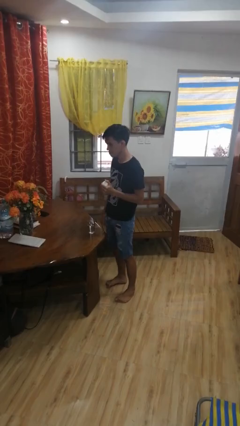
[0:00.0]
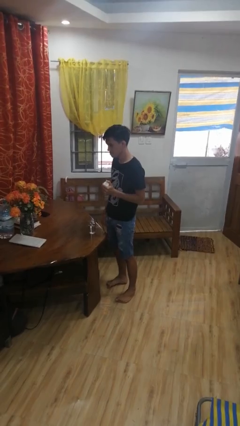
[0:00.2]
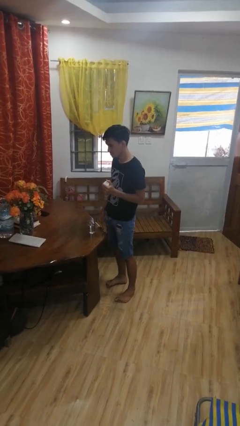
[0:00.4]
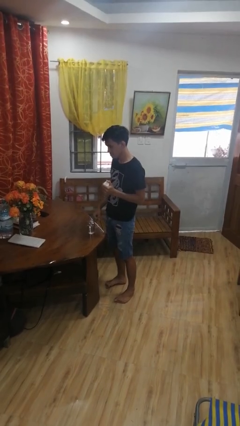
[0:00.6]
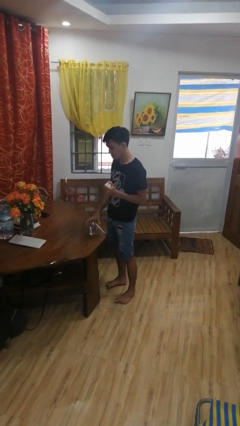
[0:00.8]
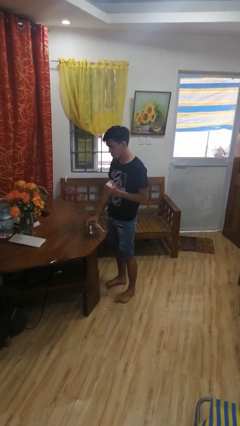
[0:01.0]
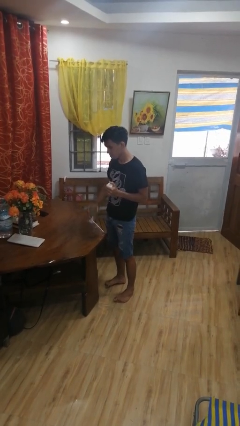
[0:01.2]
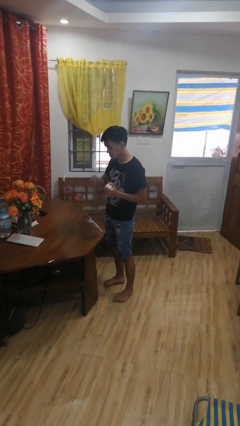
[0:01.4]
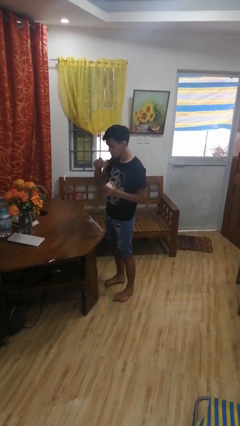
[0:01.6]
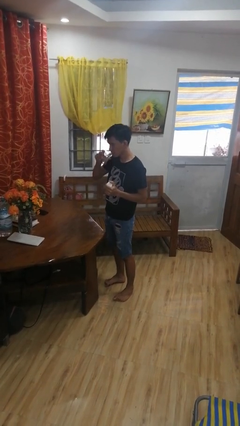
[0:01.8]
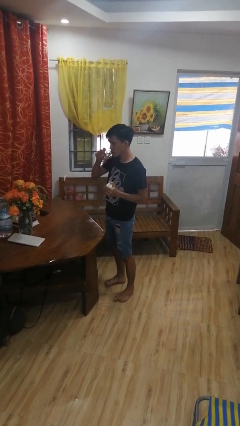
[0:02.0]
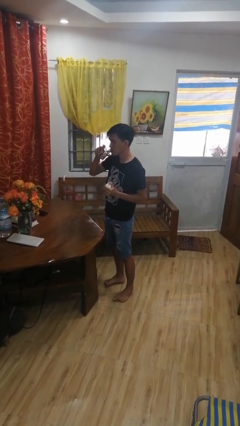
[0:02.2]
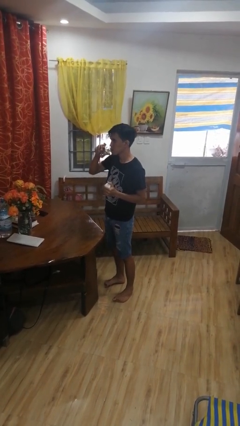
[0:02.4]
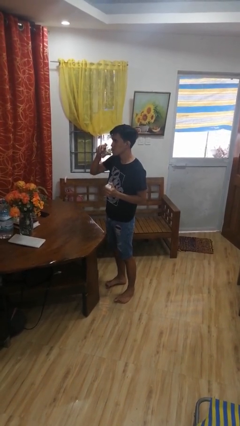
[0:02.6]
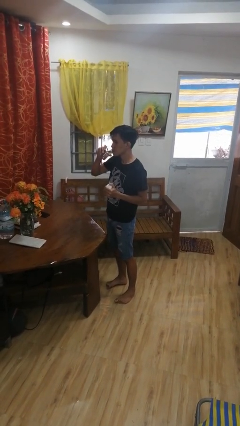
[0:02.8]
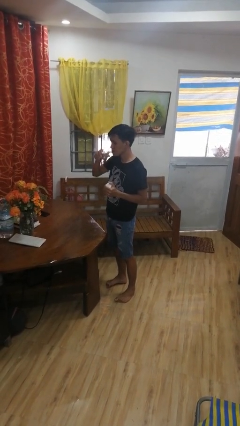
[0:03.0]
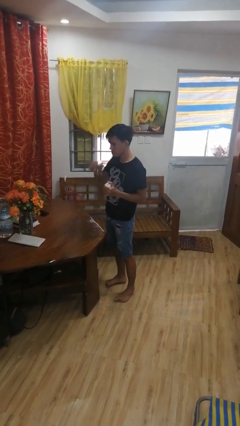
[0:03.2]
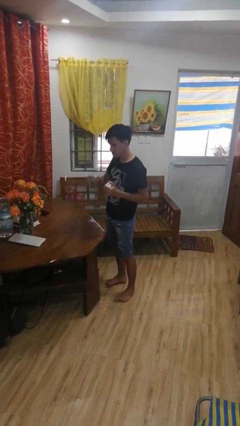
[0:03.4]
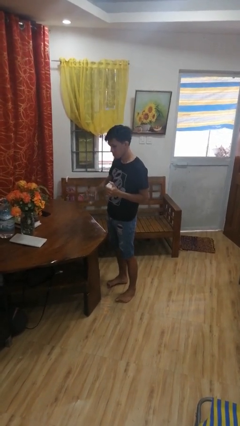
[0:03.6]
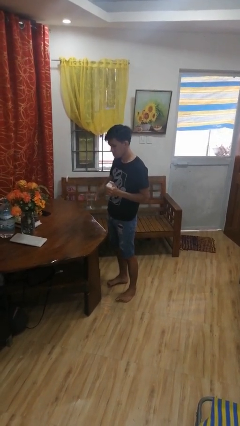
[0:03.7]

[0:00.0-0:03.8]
person drinks from cup

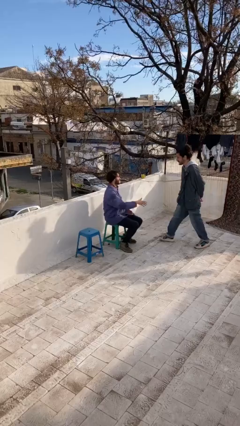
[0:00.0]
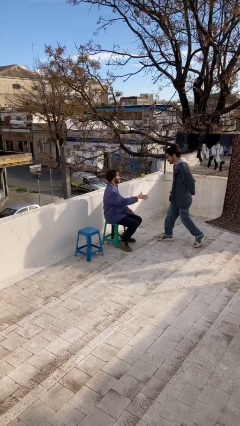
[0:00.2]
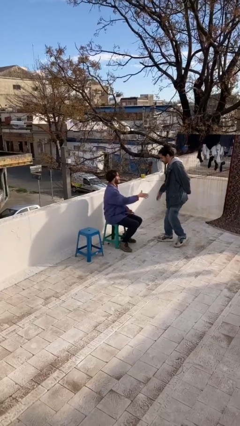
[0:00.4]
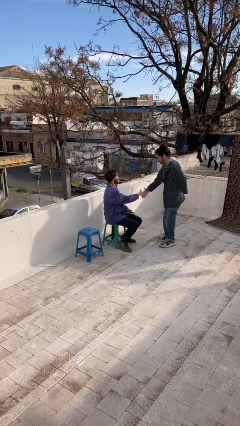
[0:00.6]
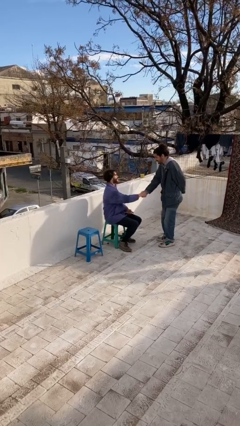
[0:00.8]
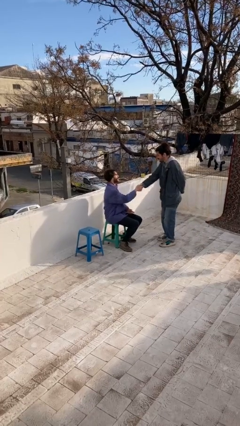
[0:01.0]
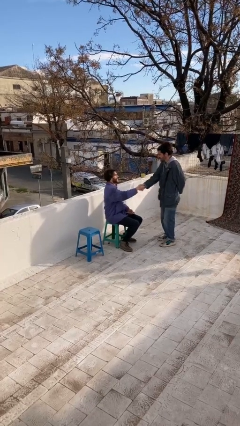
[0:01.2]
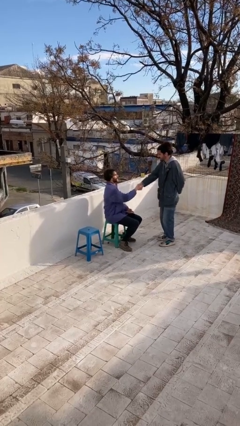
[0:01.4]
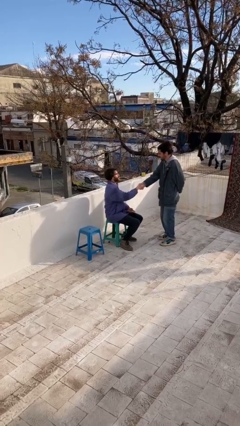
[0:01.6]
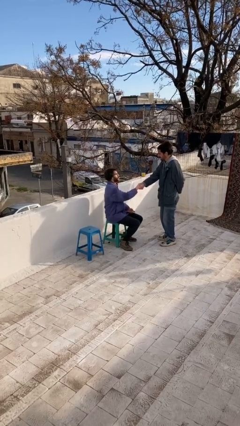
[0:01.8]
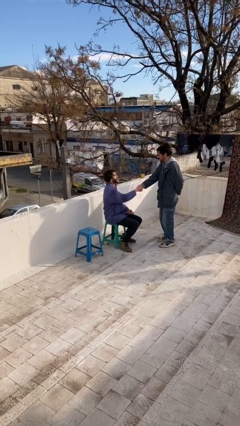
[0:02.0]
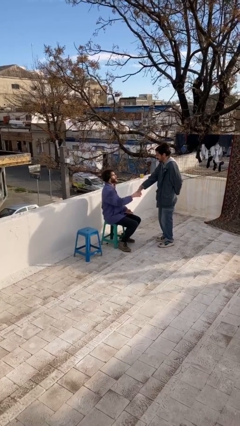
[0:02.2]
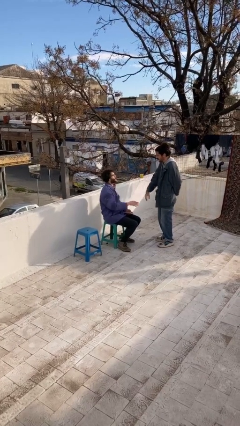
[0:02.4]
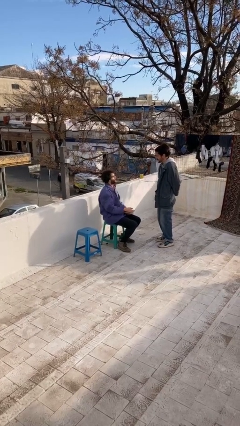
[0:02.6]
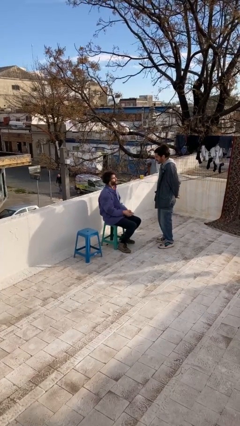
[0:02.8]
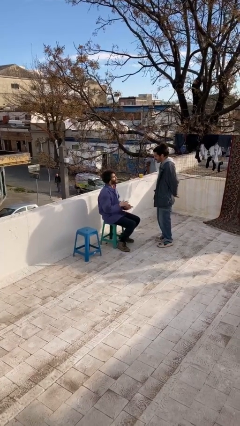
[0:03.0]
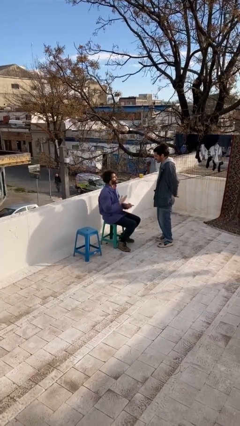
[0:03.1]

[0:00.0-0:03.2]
person shakes hand

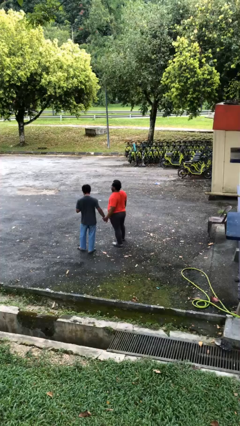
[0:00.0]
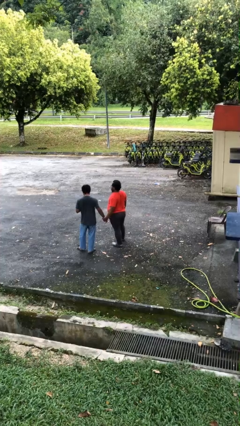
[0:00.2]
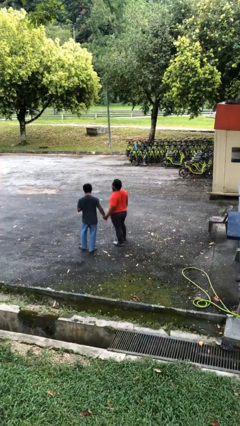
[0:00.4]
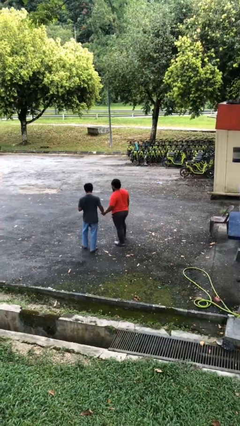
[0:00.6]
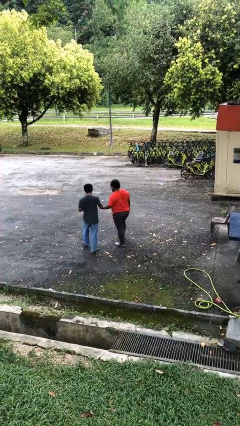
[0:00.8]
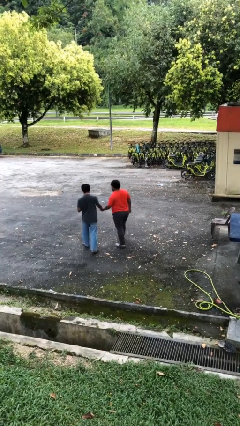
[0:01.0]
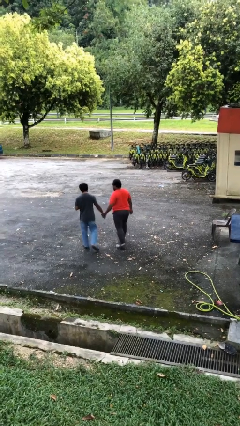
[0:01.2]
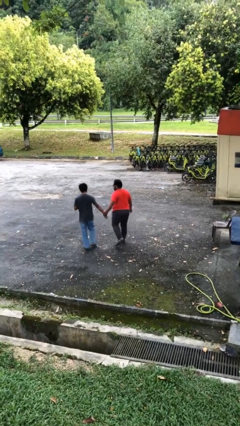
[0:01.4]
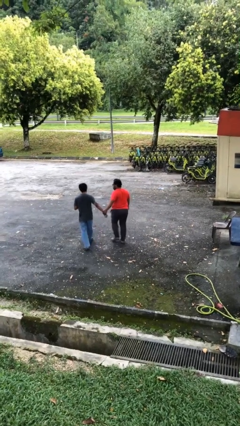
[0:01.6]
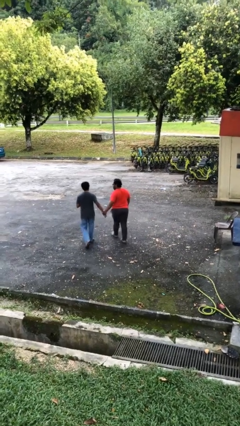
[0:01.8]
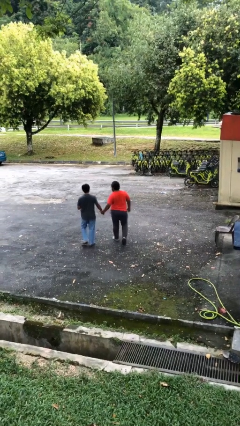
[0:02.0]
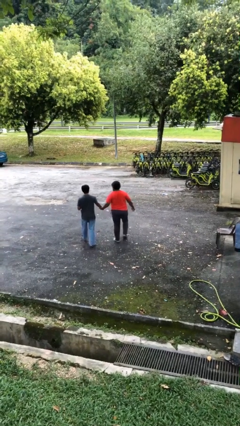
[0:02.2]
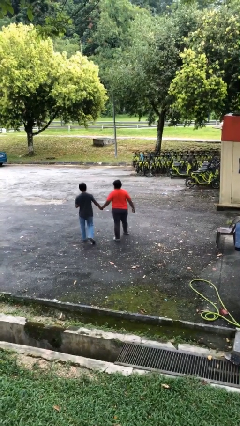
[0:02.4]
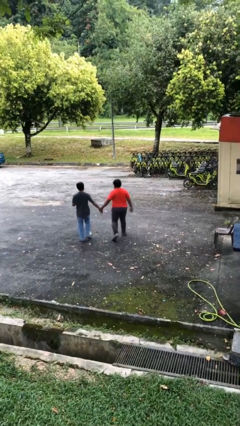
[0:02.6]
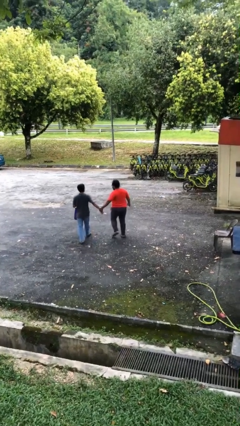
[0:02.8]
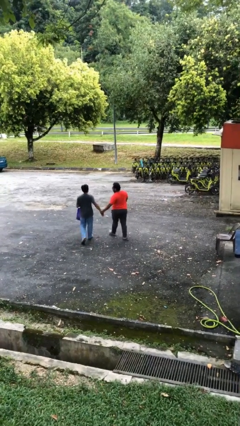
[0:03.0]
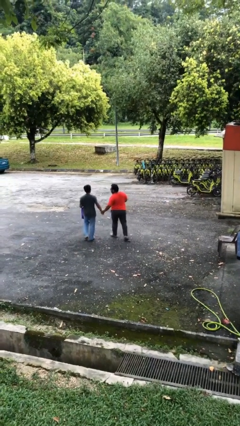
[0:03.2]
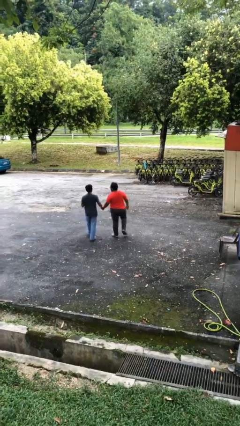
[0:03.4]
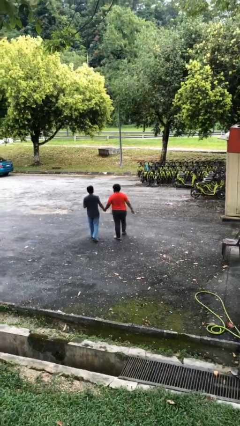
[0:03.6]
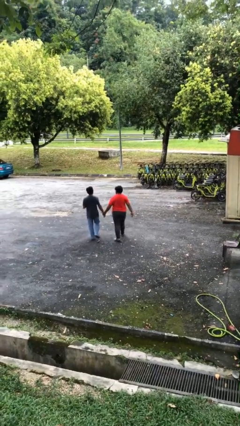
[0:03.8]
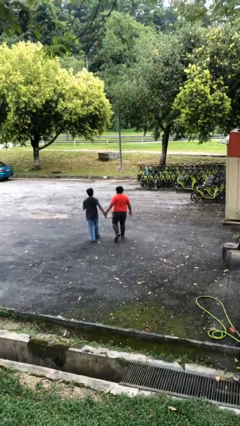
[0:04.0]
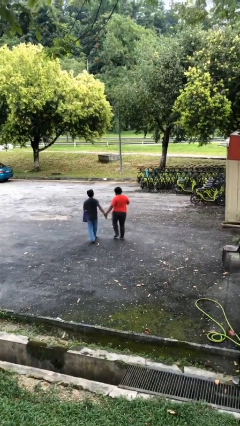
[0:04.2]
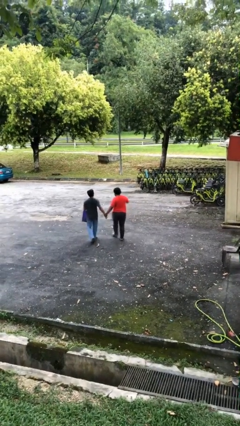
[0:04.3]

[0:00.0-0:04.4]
person holds hand

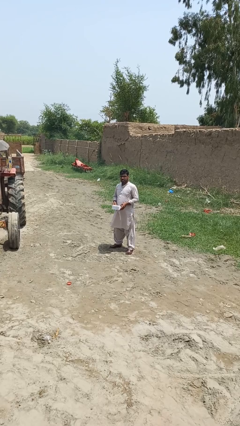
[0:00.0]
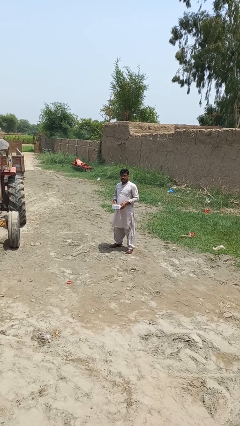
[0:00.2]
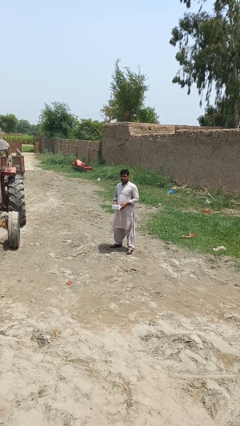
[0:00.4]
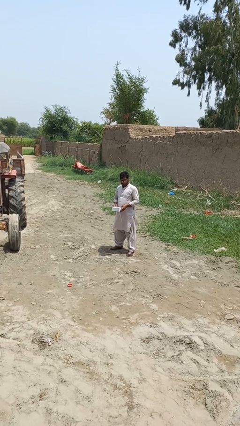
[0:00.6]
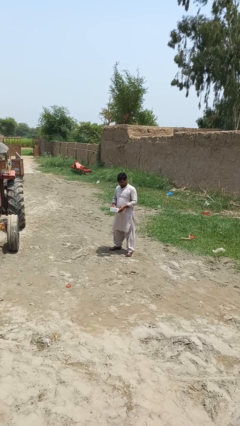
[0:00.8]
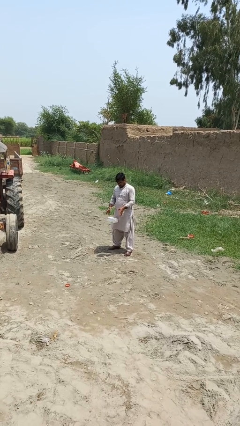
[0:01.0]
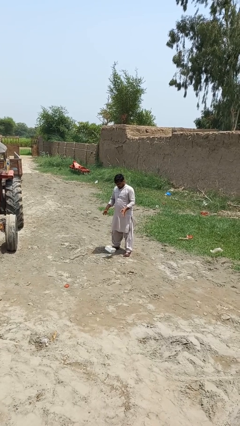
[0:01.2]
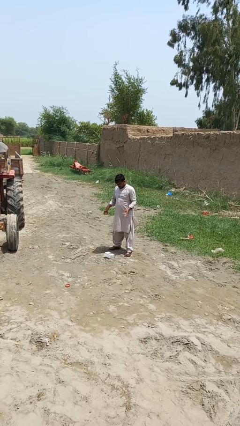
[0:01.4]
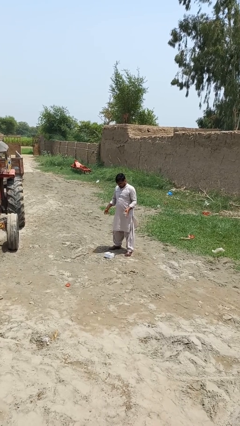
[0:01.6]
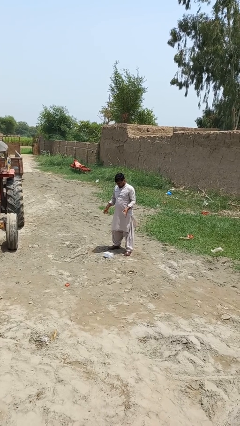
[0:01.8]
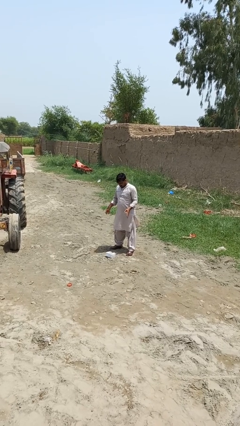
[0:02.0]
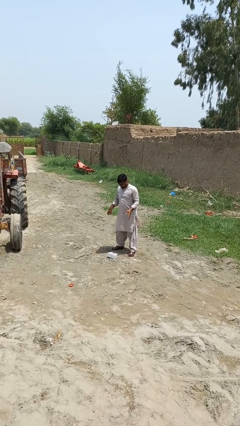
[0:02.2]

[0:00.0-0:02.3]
person drops object

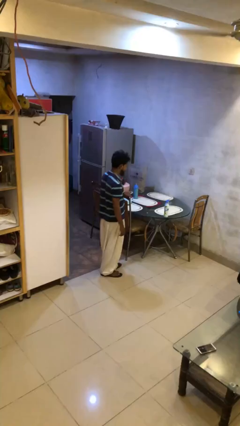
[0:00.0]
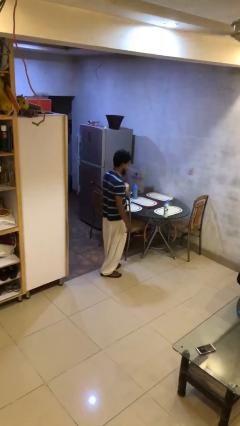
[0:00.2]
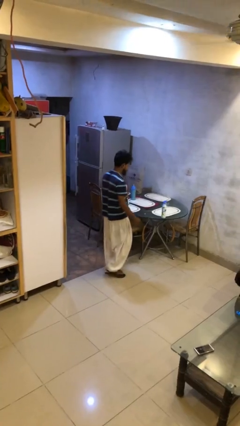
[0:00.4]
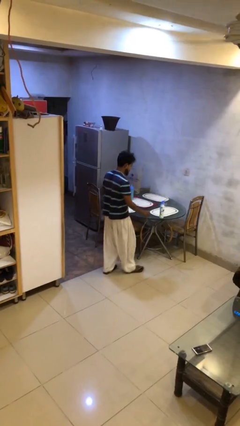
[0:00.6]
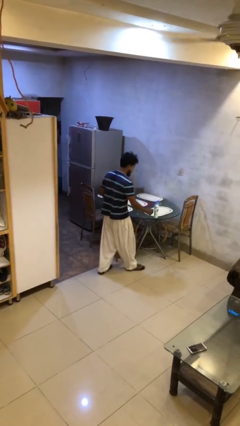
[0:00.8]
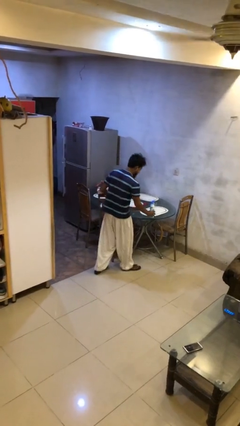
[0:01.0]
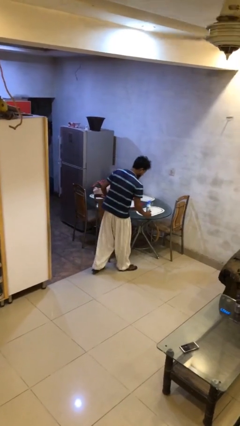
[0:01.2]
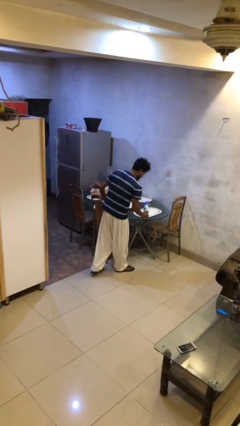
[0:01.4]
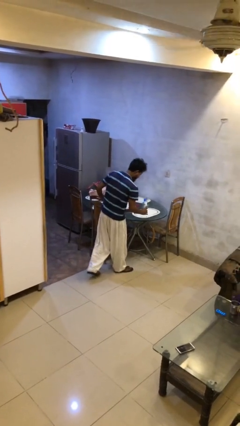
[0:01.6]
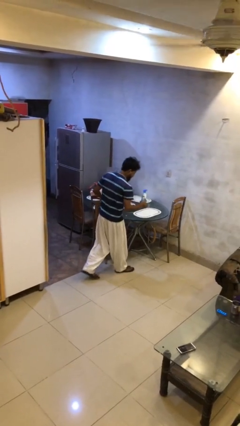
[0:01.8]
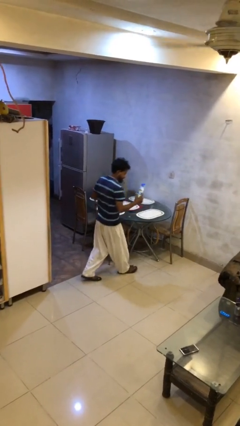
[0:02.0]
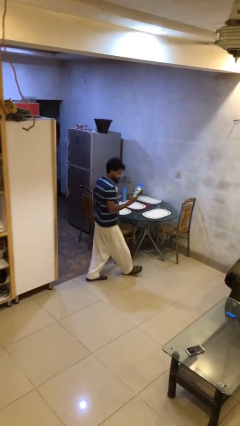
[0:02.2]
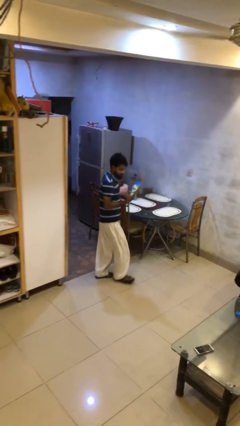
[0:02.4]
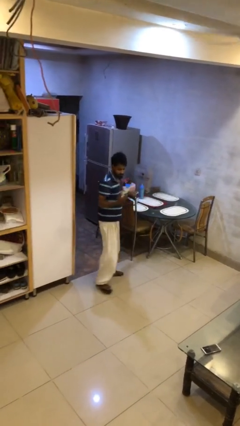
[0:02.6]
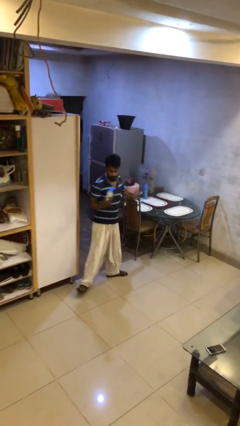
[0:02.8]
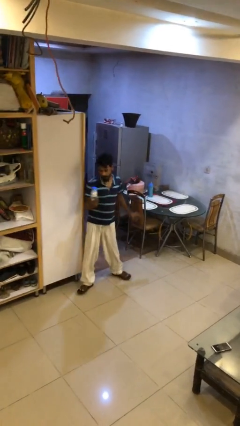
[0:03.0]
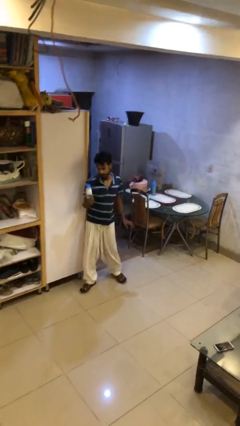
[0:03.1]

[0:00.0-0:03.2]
person picks up object from table

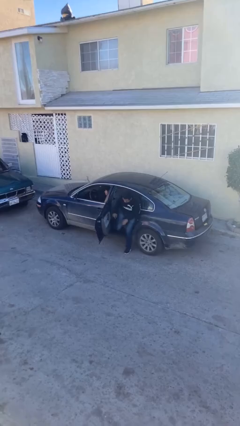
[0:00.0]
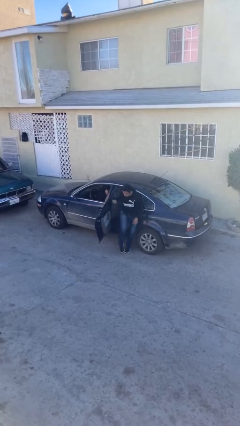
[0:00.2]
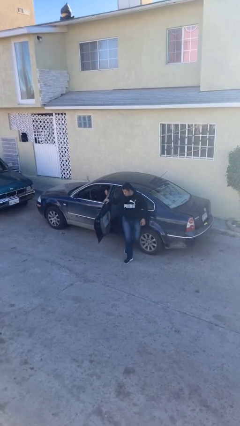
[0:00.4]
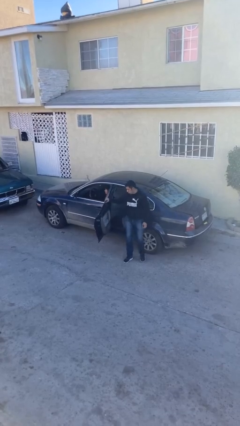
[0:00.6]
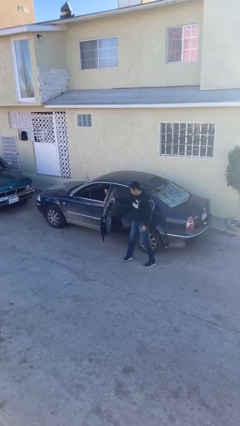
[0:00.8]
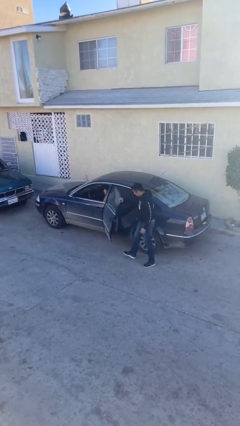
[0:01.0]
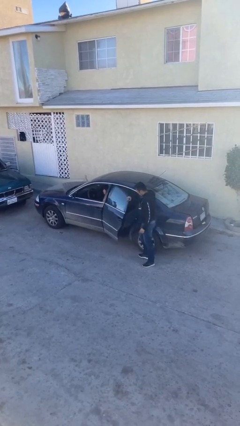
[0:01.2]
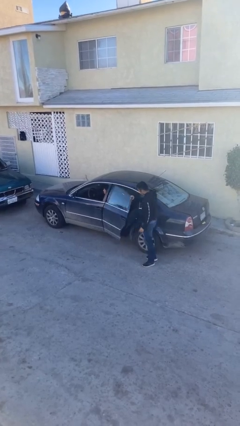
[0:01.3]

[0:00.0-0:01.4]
car drops off person
